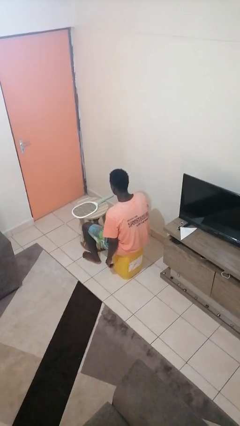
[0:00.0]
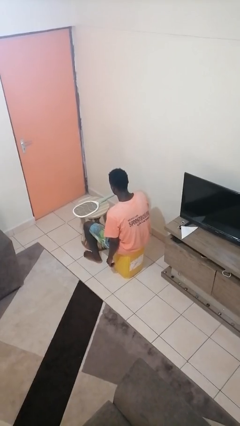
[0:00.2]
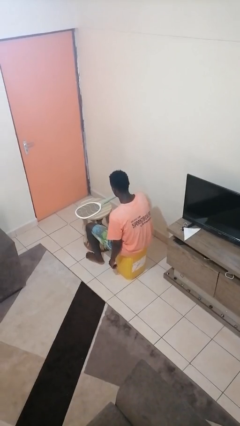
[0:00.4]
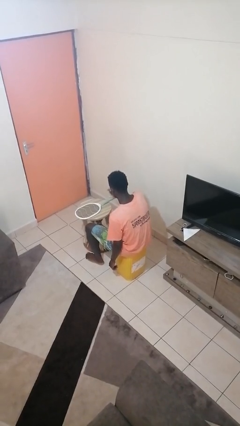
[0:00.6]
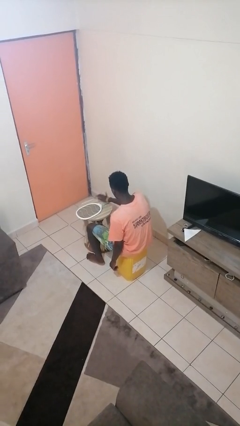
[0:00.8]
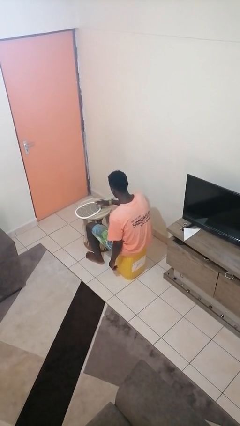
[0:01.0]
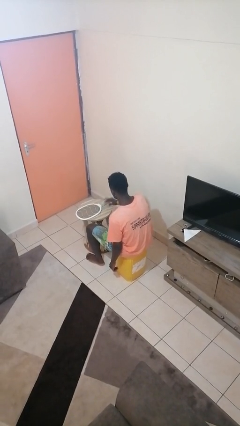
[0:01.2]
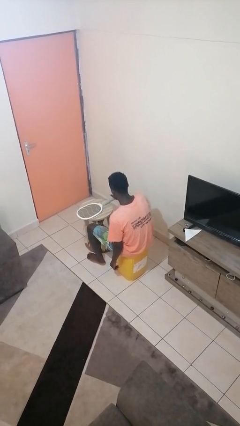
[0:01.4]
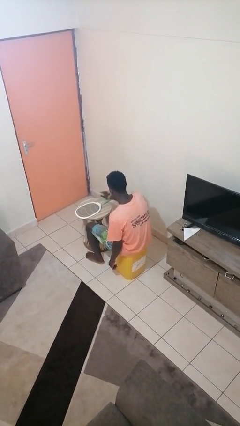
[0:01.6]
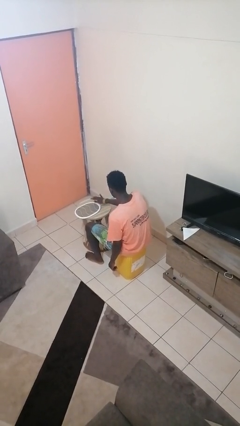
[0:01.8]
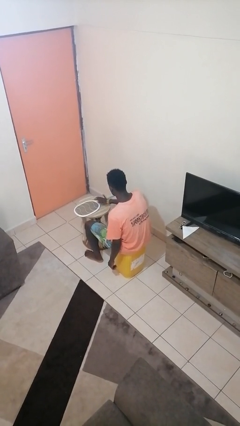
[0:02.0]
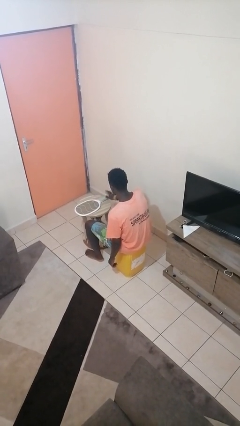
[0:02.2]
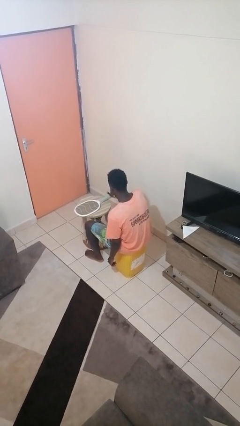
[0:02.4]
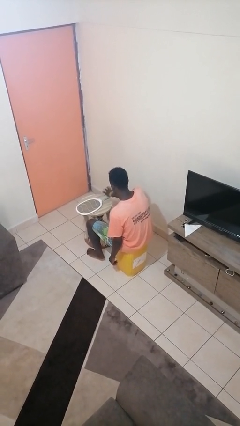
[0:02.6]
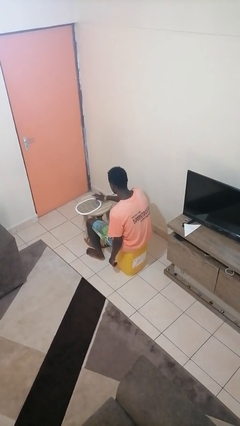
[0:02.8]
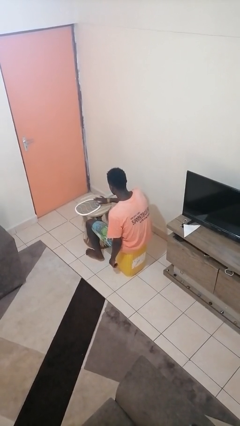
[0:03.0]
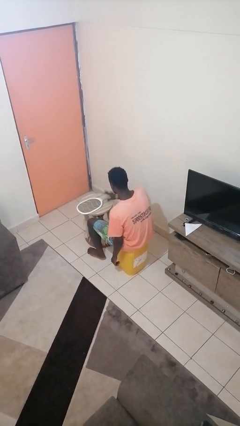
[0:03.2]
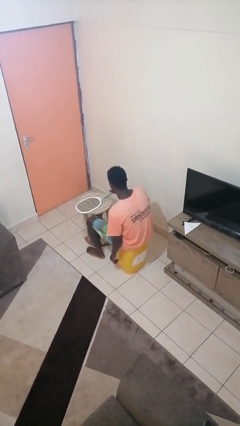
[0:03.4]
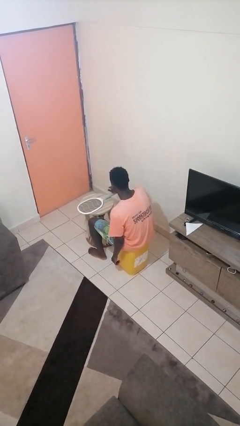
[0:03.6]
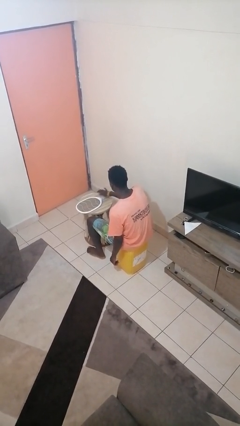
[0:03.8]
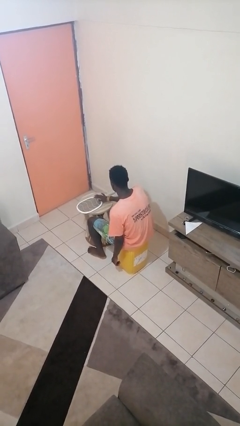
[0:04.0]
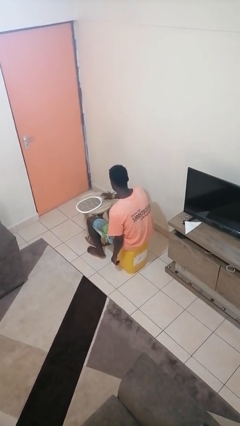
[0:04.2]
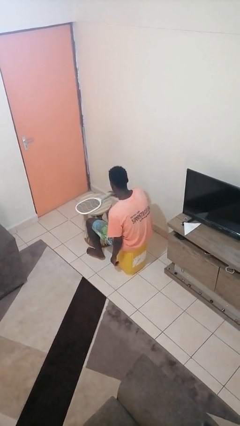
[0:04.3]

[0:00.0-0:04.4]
person waves hand over object

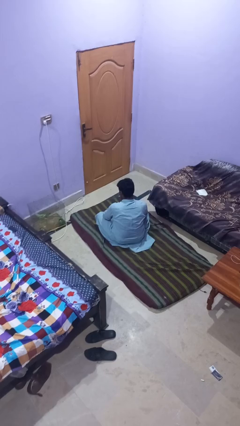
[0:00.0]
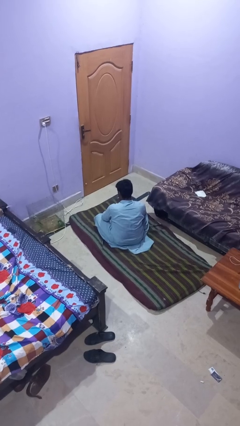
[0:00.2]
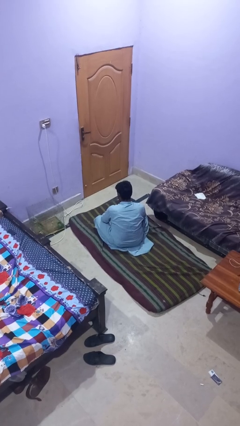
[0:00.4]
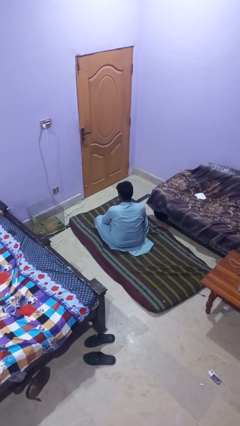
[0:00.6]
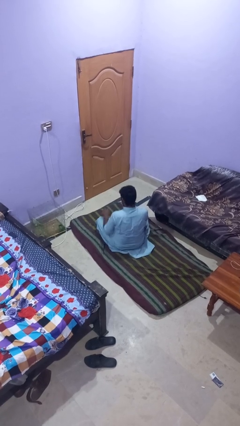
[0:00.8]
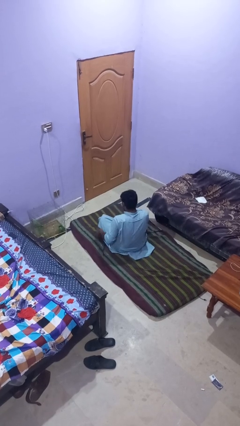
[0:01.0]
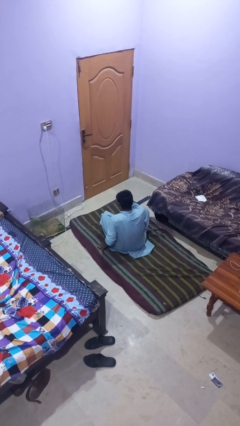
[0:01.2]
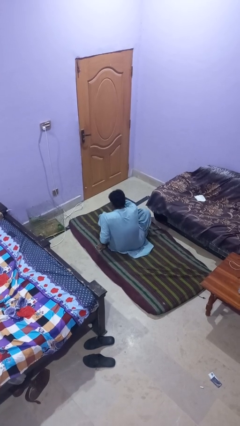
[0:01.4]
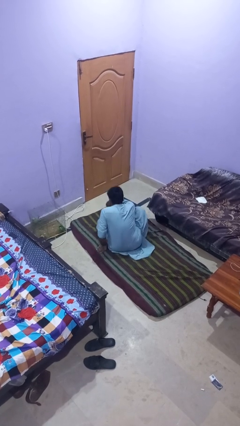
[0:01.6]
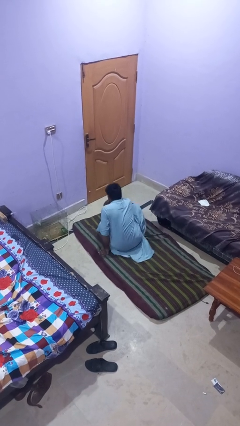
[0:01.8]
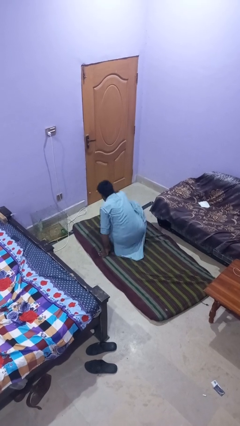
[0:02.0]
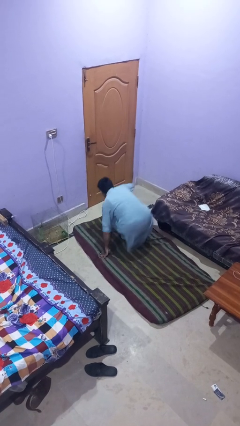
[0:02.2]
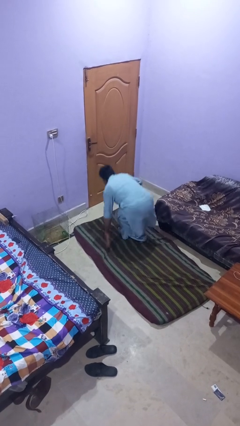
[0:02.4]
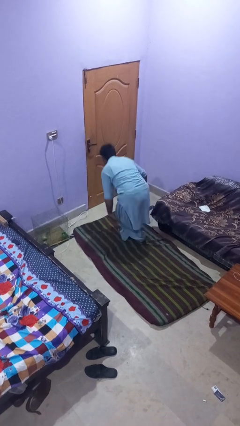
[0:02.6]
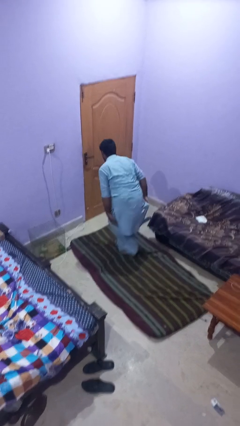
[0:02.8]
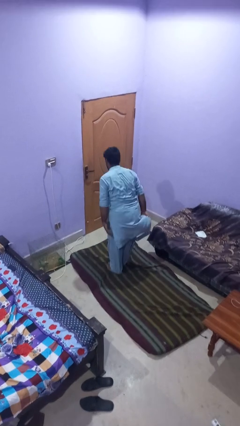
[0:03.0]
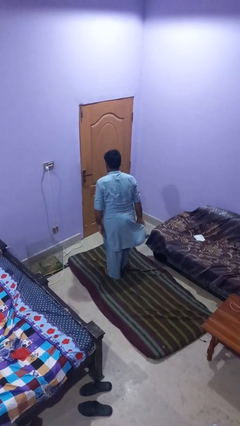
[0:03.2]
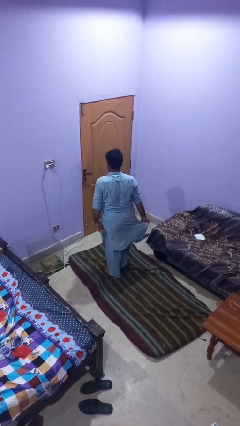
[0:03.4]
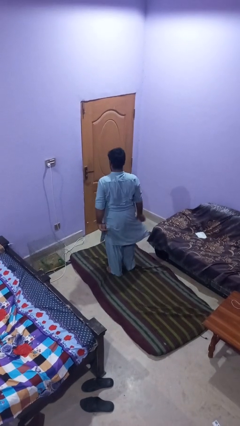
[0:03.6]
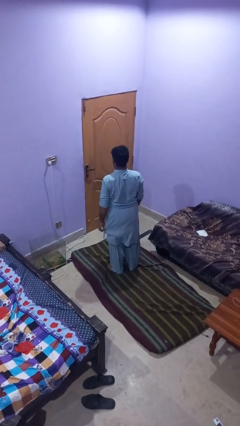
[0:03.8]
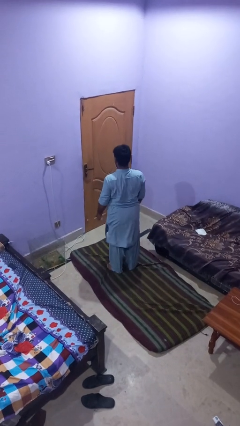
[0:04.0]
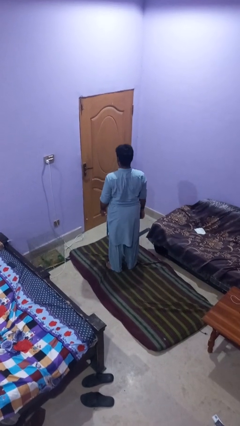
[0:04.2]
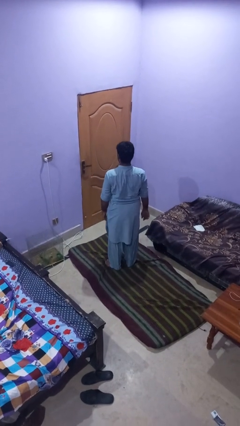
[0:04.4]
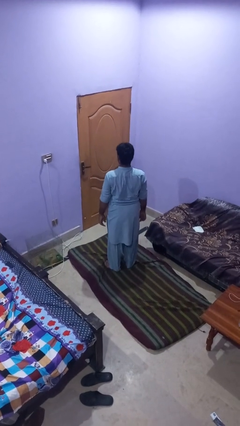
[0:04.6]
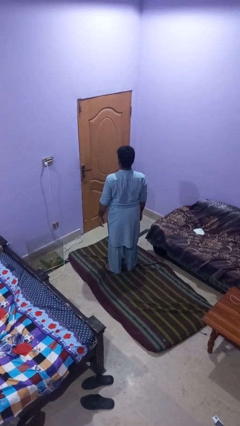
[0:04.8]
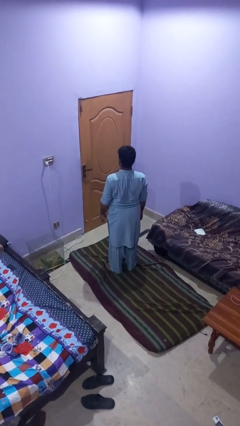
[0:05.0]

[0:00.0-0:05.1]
person stands up from floor

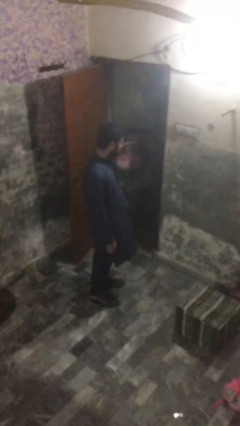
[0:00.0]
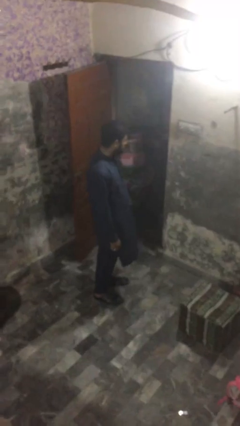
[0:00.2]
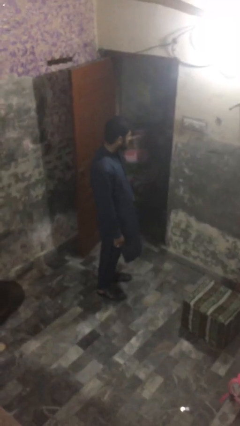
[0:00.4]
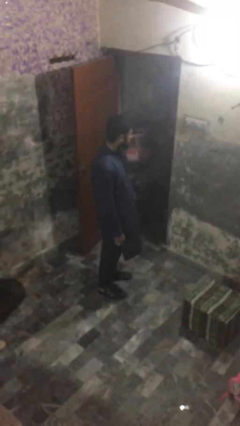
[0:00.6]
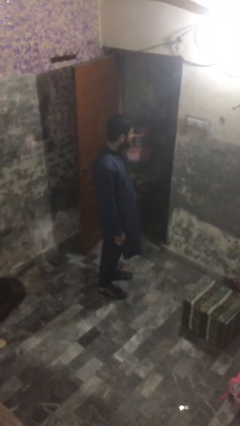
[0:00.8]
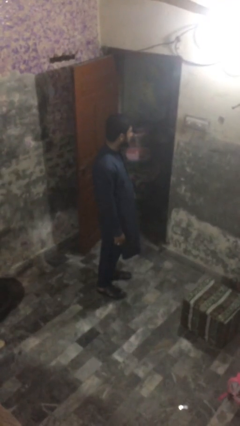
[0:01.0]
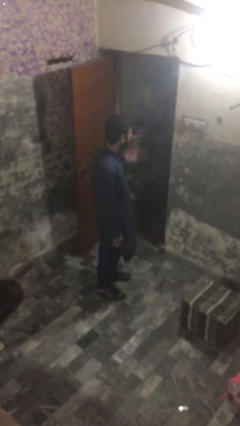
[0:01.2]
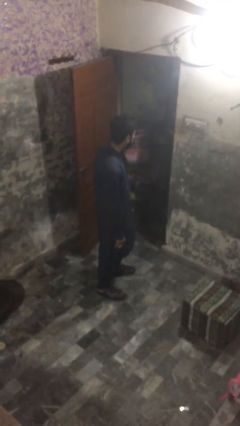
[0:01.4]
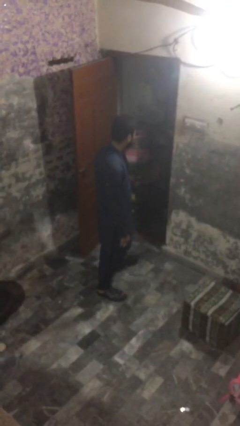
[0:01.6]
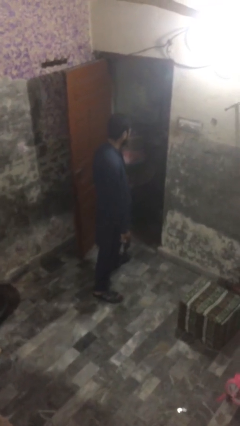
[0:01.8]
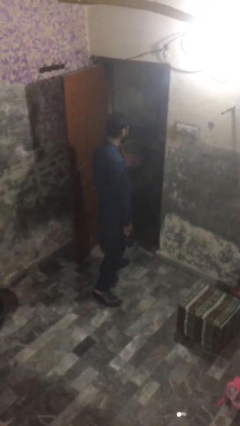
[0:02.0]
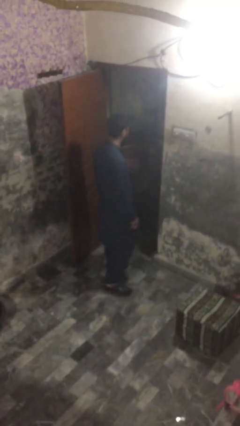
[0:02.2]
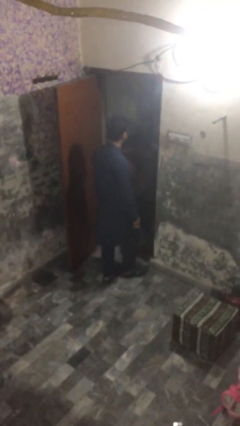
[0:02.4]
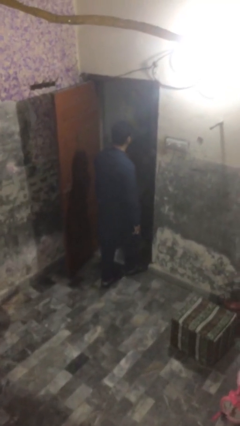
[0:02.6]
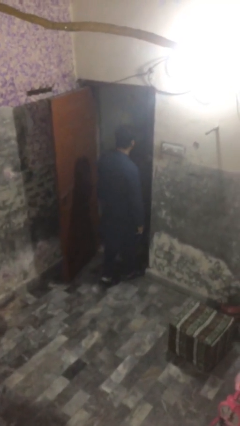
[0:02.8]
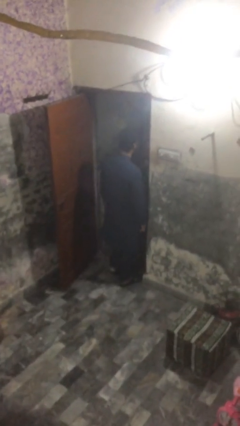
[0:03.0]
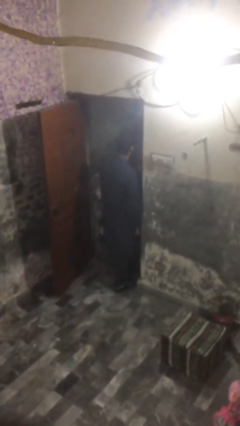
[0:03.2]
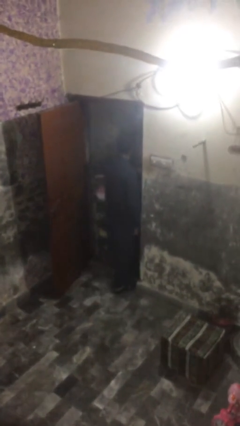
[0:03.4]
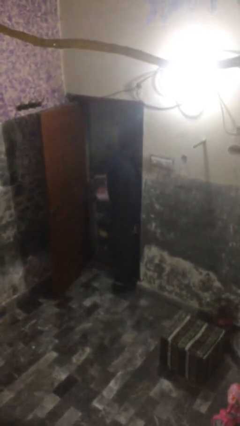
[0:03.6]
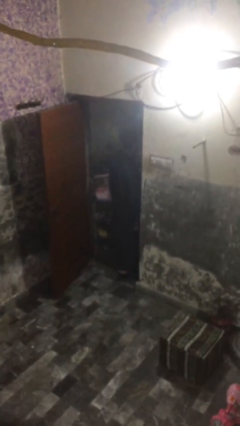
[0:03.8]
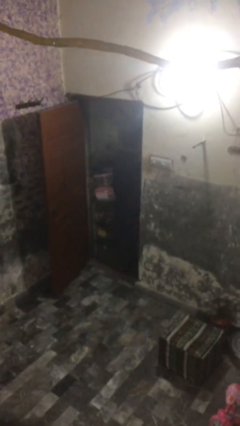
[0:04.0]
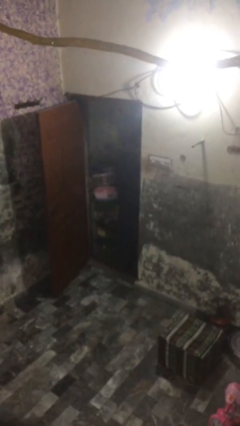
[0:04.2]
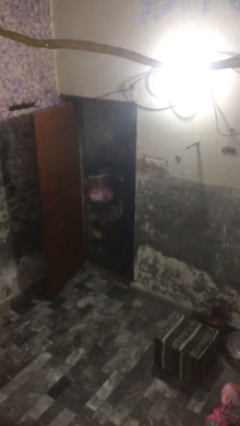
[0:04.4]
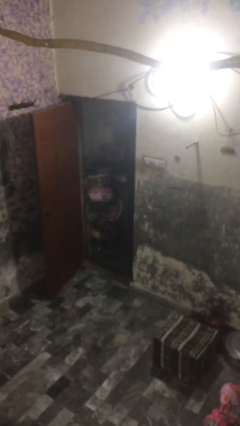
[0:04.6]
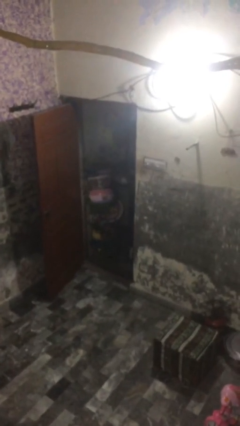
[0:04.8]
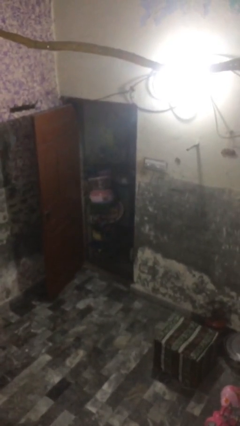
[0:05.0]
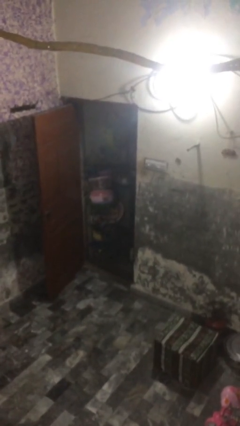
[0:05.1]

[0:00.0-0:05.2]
person exits scene through structure

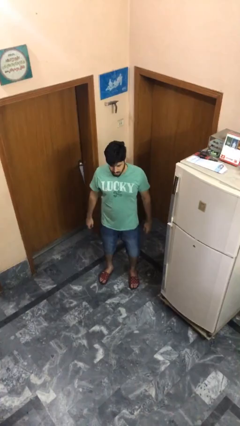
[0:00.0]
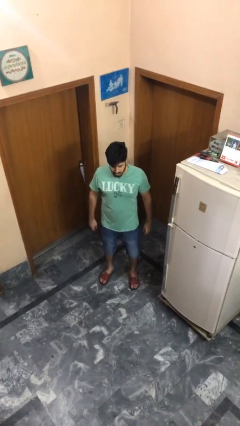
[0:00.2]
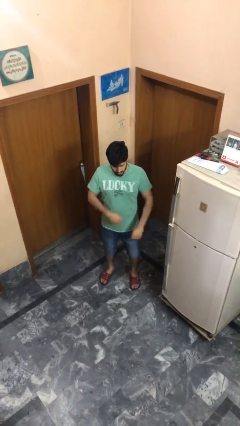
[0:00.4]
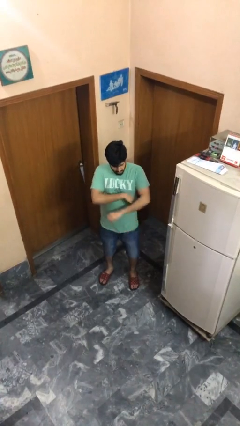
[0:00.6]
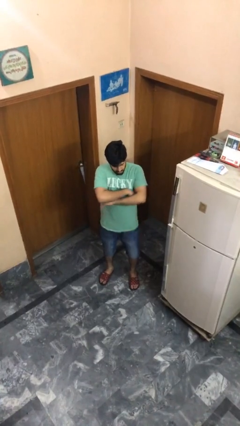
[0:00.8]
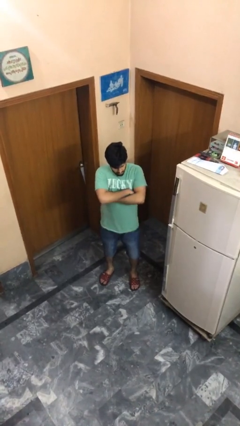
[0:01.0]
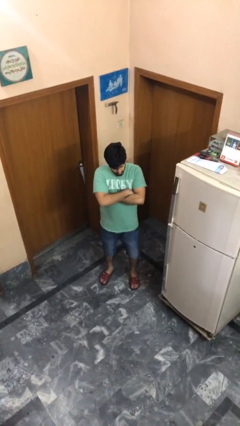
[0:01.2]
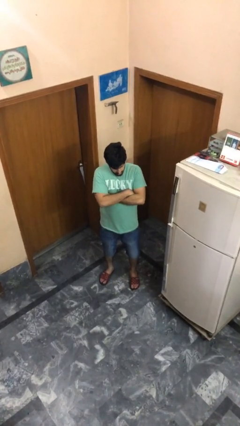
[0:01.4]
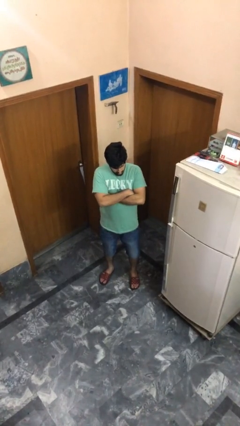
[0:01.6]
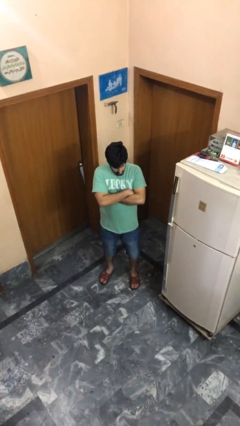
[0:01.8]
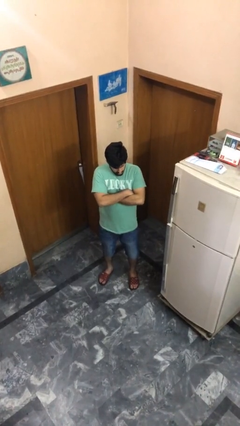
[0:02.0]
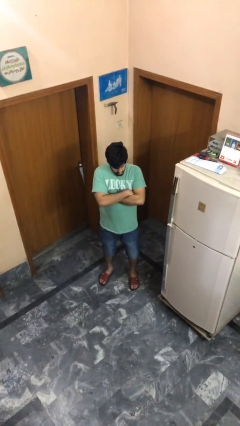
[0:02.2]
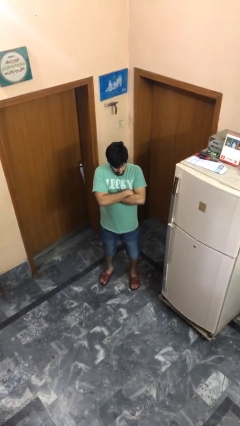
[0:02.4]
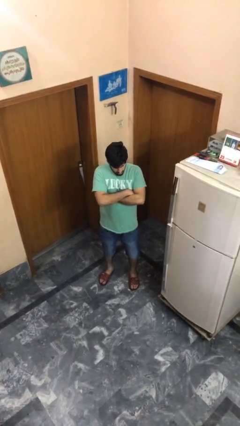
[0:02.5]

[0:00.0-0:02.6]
person crosses arms

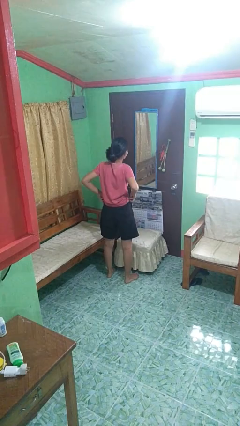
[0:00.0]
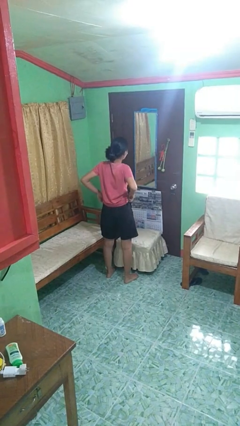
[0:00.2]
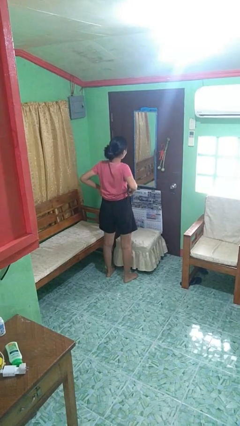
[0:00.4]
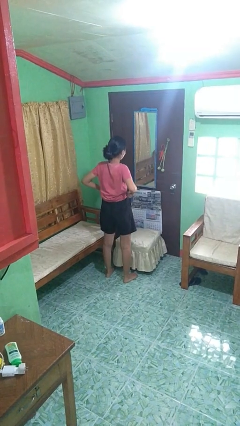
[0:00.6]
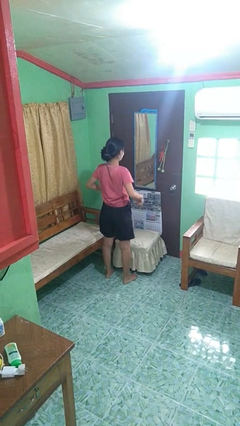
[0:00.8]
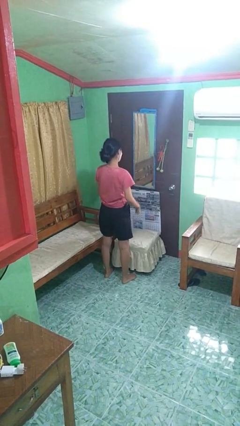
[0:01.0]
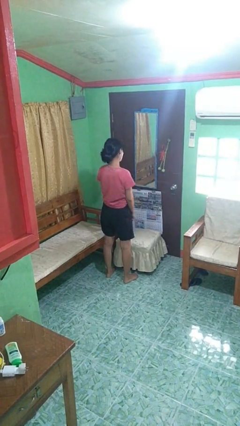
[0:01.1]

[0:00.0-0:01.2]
person hikes up pants
